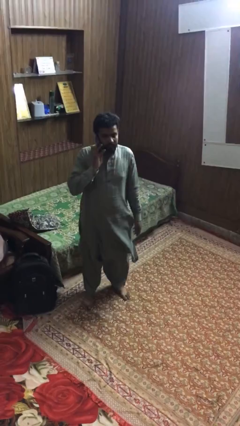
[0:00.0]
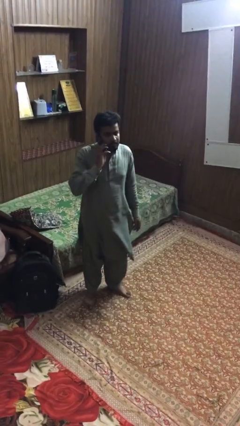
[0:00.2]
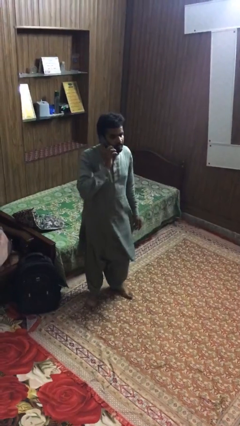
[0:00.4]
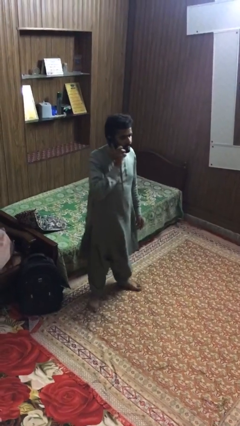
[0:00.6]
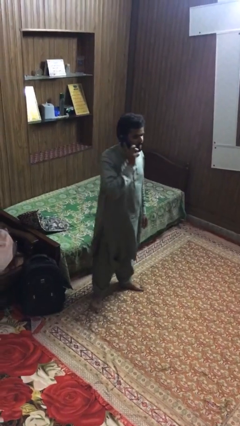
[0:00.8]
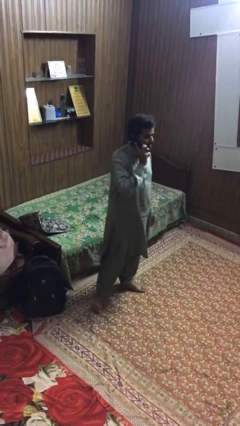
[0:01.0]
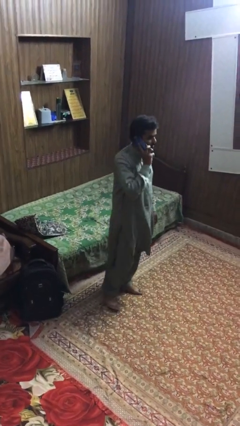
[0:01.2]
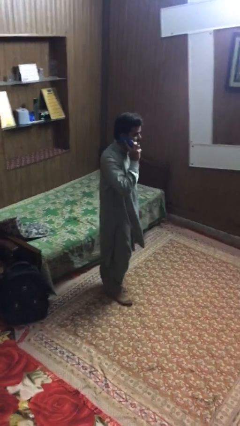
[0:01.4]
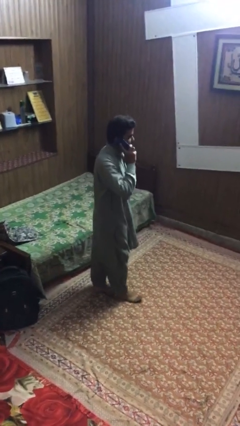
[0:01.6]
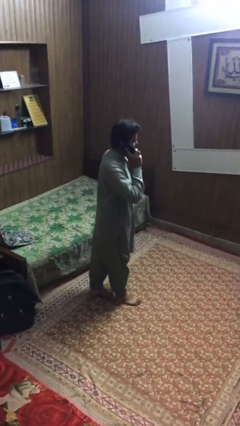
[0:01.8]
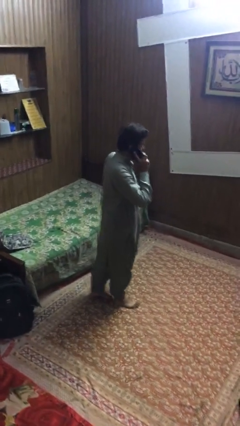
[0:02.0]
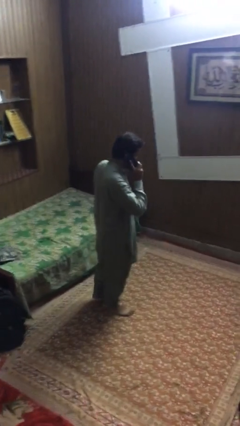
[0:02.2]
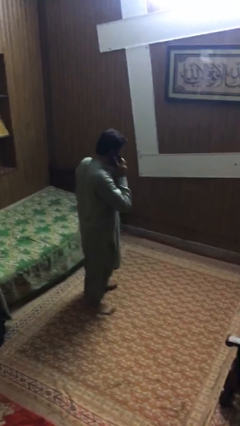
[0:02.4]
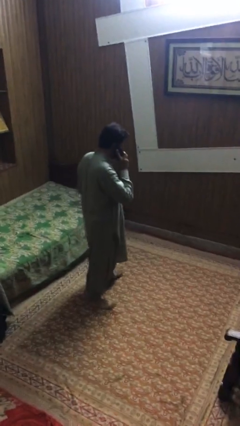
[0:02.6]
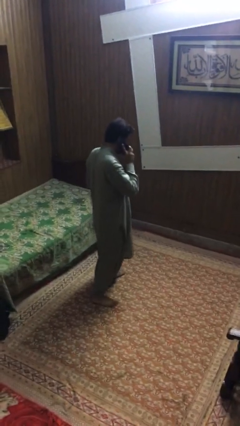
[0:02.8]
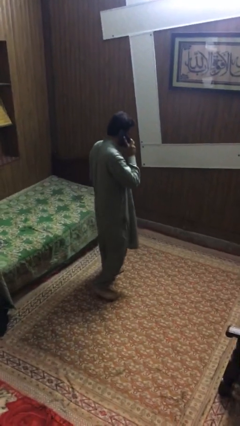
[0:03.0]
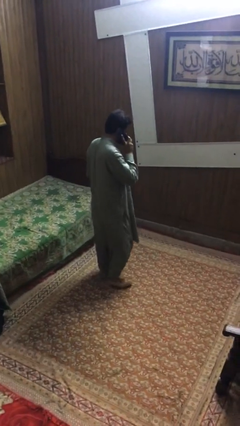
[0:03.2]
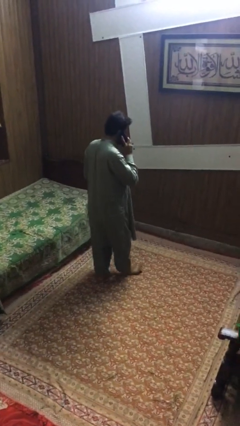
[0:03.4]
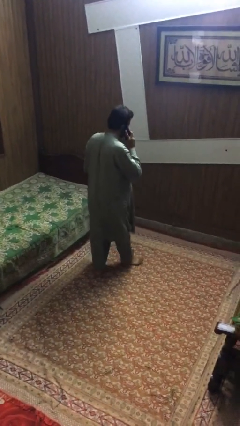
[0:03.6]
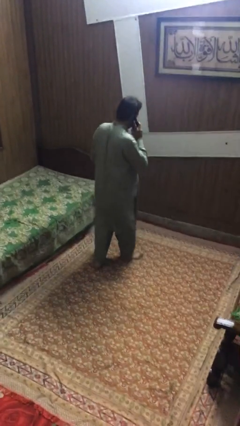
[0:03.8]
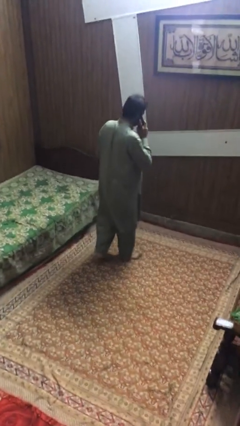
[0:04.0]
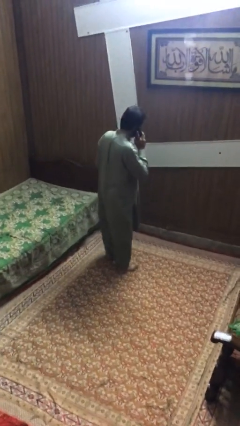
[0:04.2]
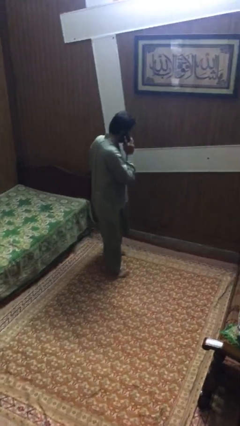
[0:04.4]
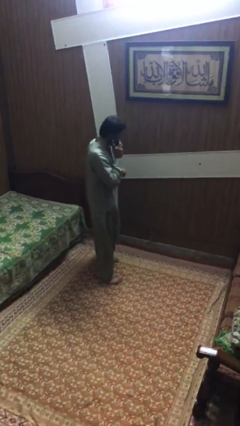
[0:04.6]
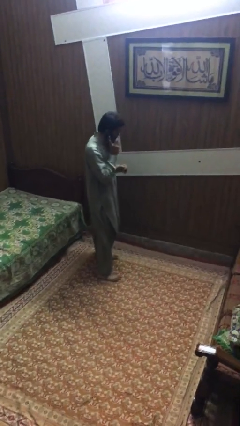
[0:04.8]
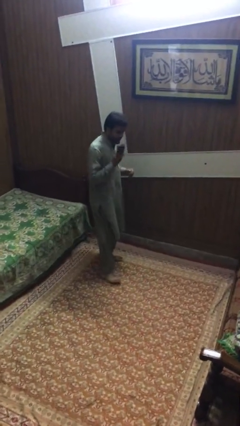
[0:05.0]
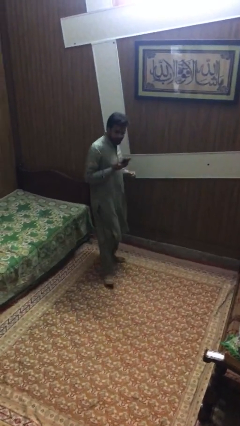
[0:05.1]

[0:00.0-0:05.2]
person talks on phone

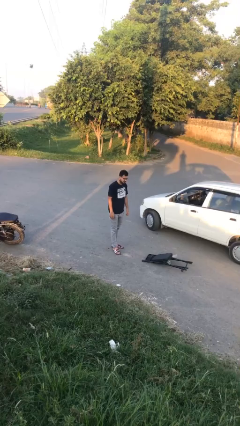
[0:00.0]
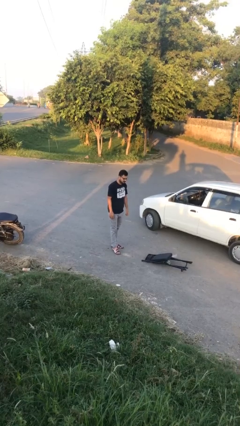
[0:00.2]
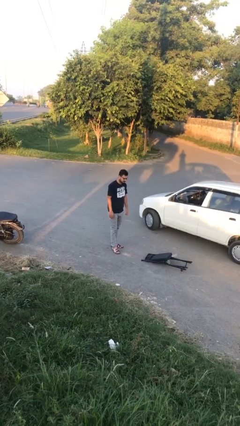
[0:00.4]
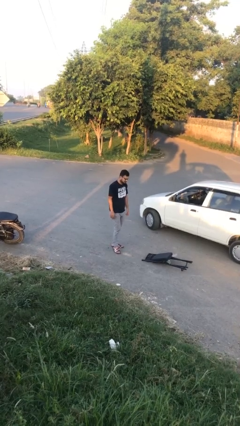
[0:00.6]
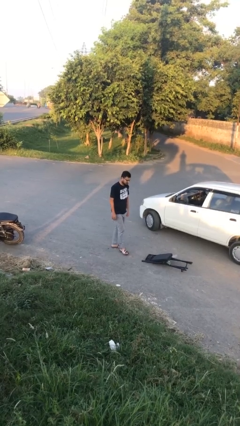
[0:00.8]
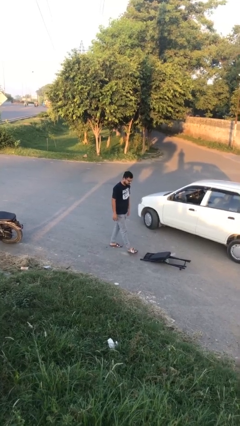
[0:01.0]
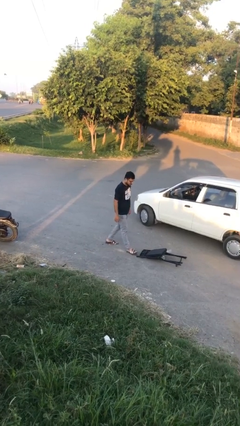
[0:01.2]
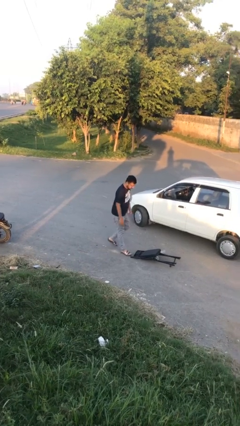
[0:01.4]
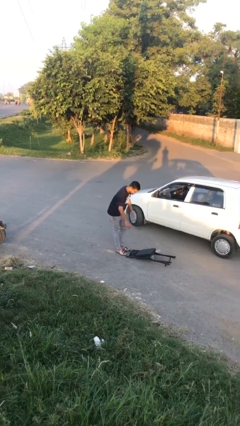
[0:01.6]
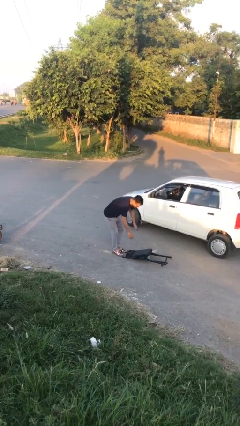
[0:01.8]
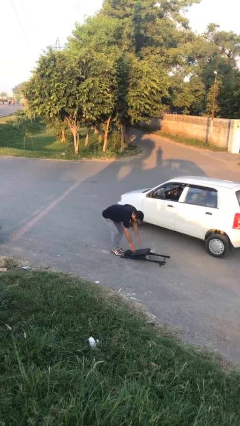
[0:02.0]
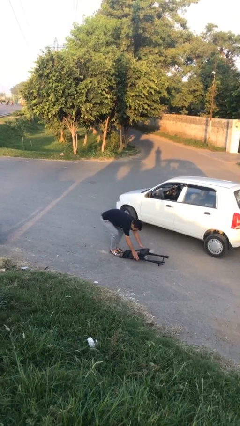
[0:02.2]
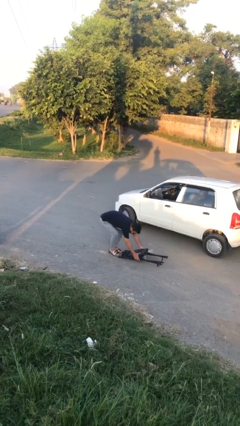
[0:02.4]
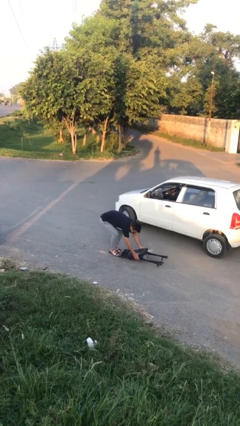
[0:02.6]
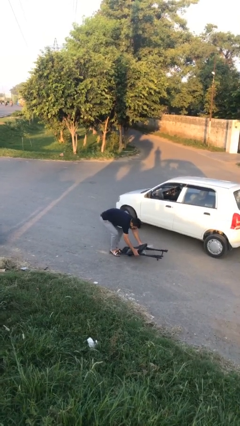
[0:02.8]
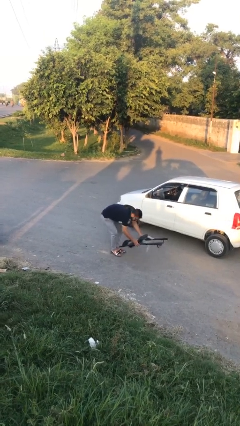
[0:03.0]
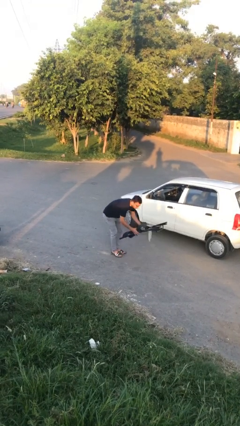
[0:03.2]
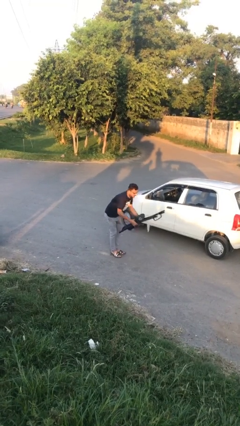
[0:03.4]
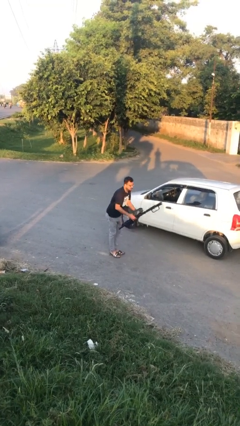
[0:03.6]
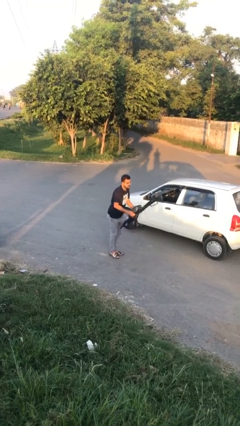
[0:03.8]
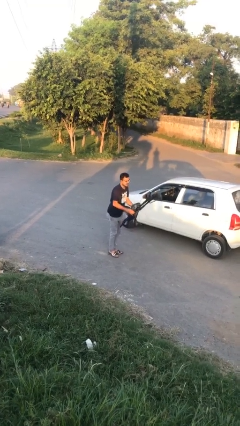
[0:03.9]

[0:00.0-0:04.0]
person picks up object from floor

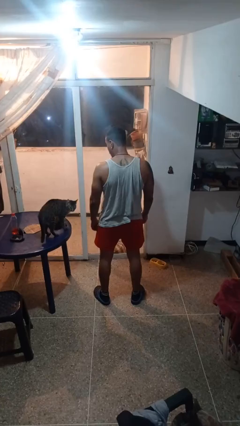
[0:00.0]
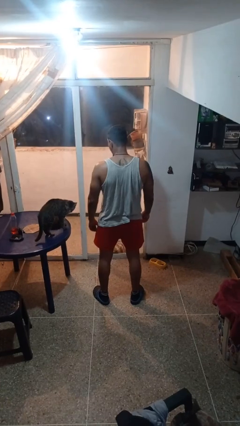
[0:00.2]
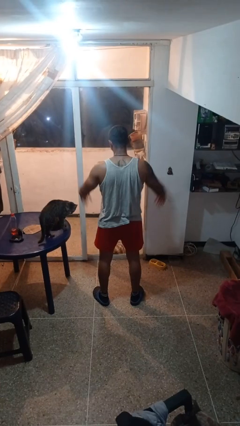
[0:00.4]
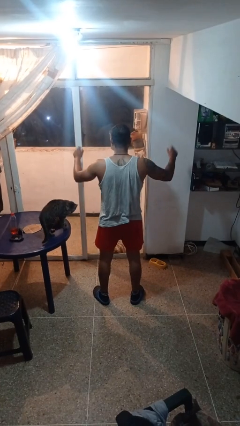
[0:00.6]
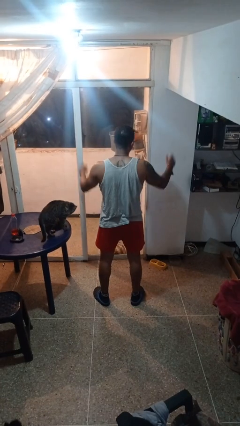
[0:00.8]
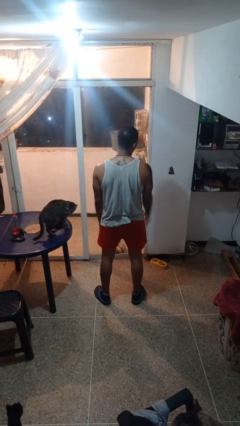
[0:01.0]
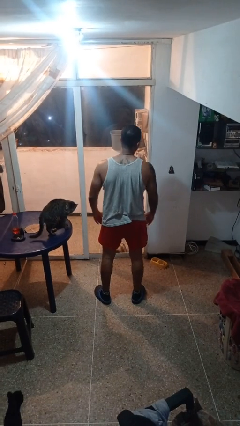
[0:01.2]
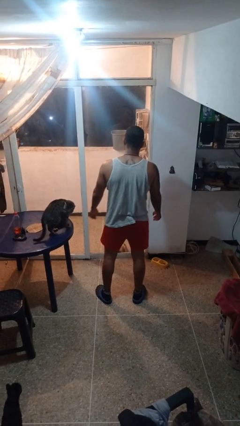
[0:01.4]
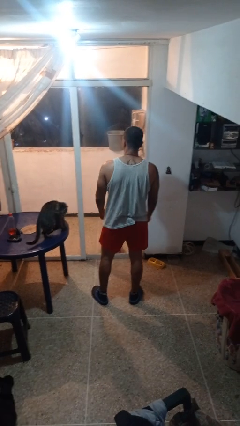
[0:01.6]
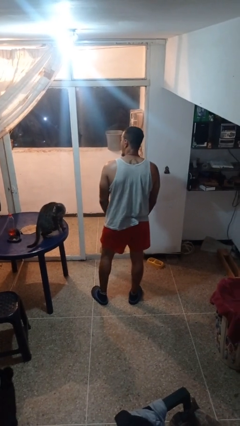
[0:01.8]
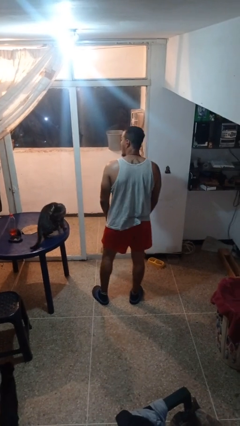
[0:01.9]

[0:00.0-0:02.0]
person slaps hands on thighs

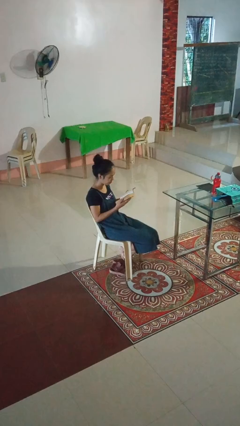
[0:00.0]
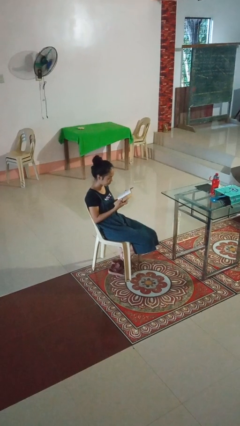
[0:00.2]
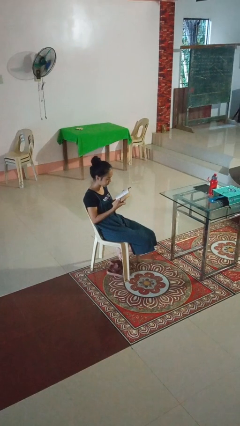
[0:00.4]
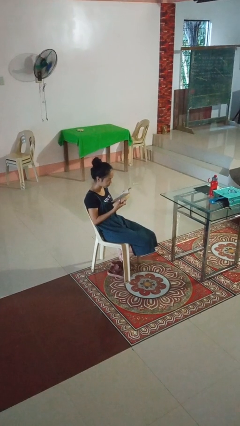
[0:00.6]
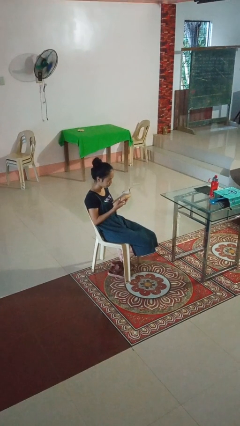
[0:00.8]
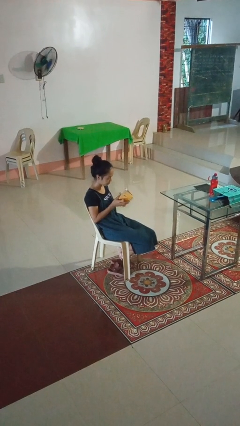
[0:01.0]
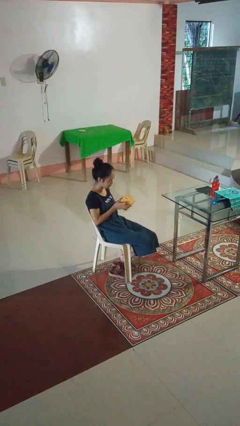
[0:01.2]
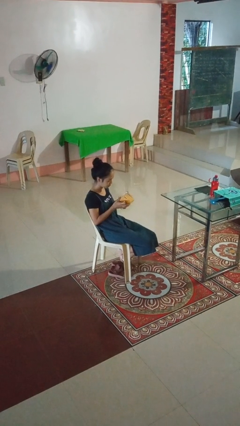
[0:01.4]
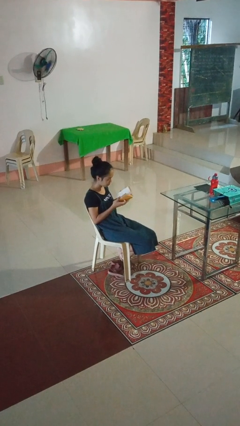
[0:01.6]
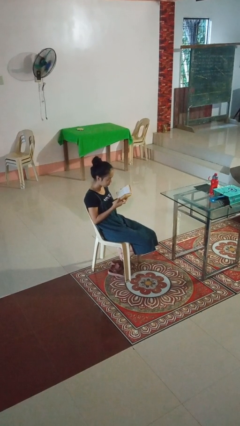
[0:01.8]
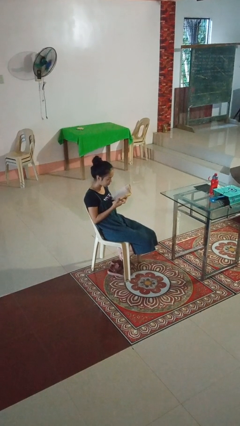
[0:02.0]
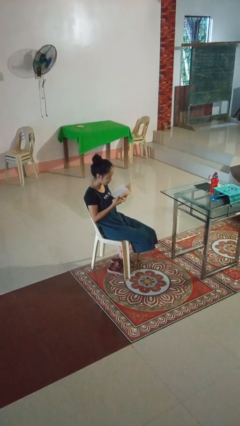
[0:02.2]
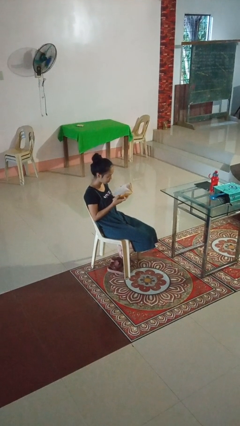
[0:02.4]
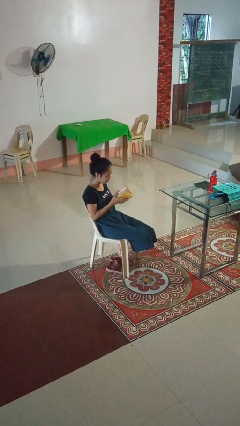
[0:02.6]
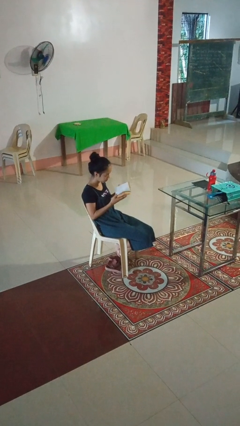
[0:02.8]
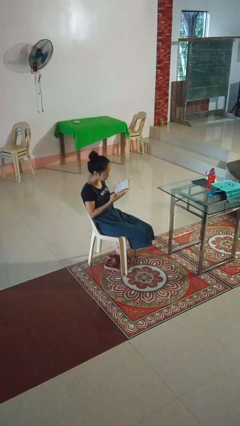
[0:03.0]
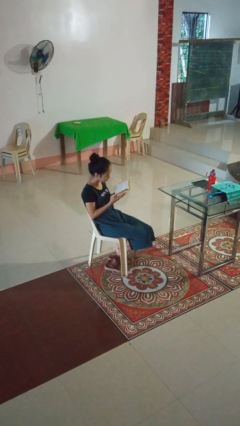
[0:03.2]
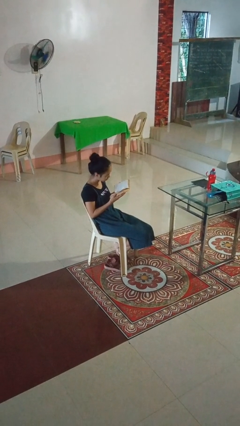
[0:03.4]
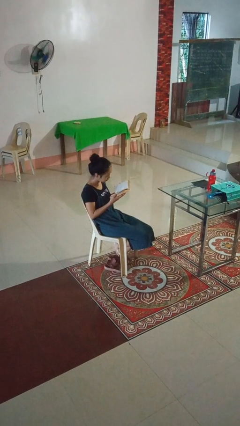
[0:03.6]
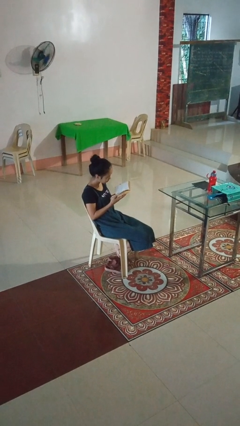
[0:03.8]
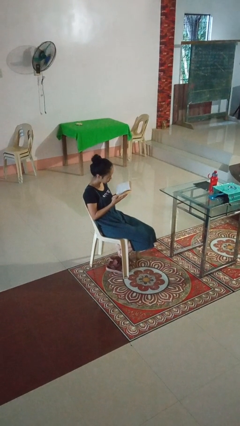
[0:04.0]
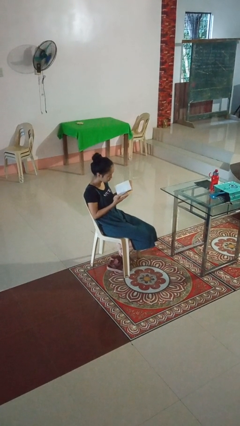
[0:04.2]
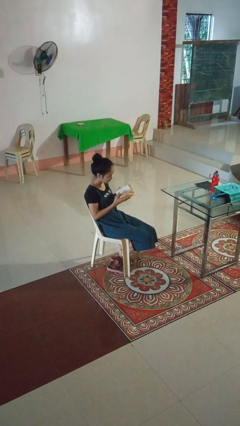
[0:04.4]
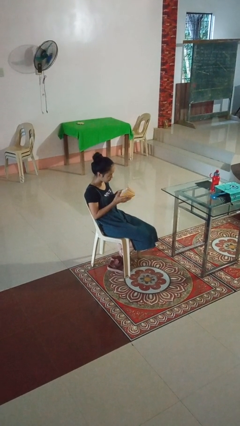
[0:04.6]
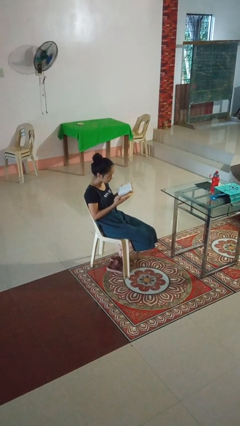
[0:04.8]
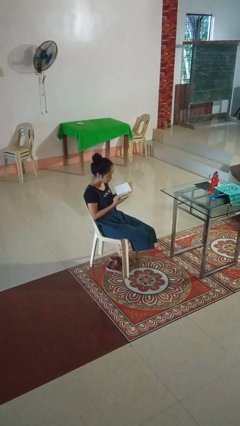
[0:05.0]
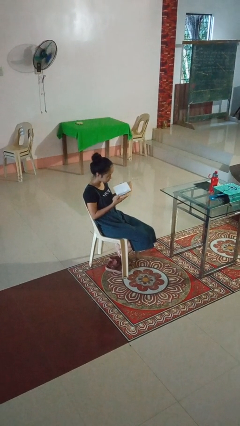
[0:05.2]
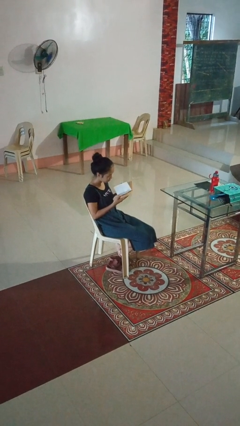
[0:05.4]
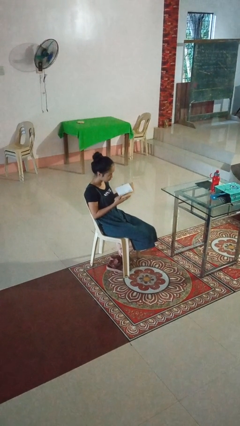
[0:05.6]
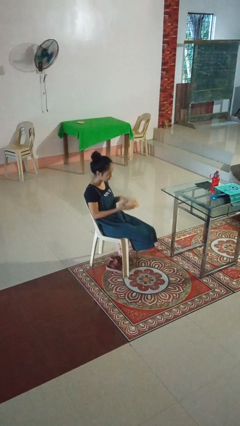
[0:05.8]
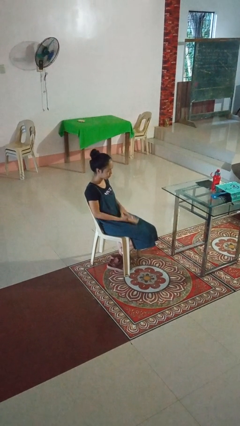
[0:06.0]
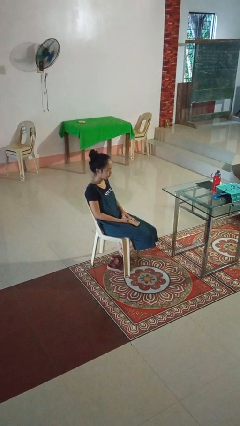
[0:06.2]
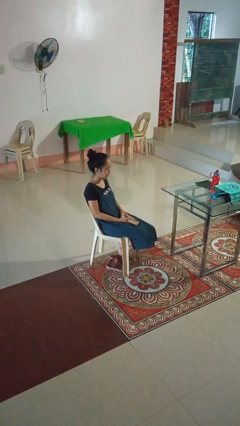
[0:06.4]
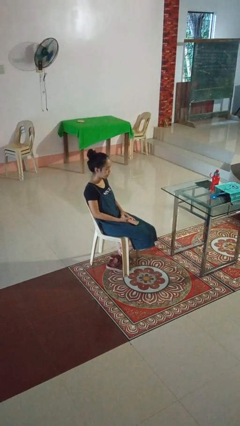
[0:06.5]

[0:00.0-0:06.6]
person reads book
